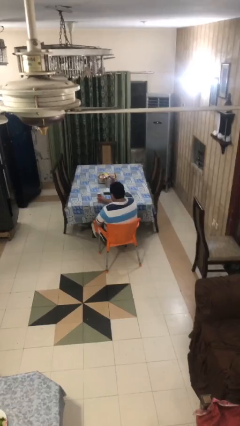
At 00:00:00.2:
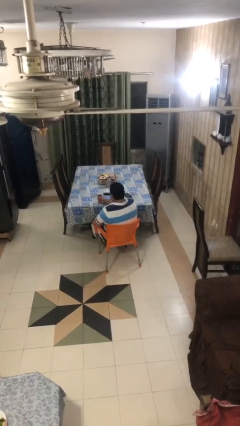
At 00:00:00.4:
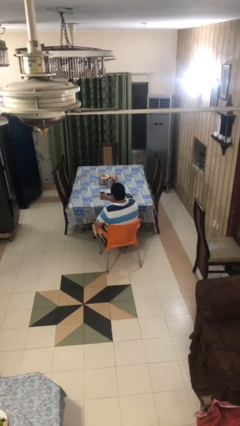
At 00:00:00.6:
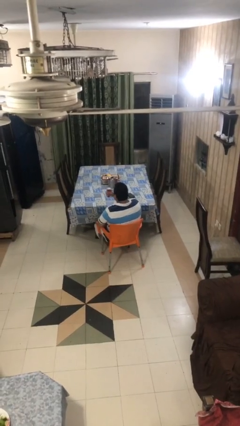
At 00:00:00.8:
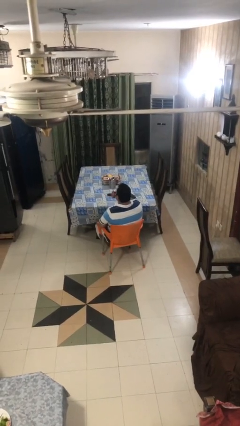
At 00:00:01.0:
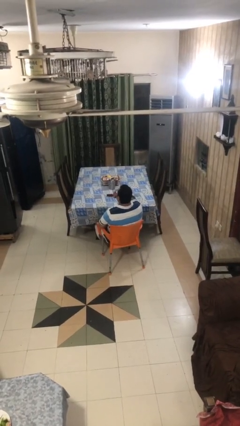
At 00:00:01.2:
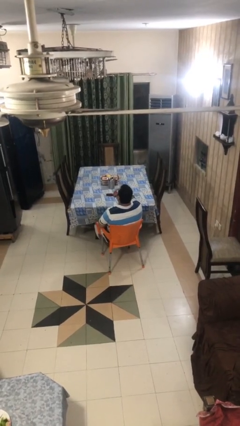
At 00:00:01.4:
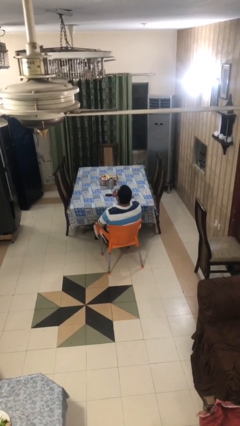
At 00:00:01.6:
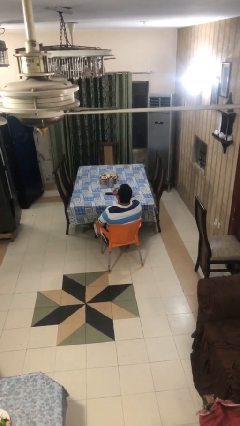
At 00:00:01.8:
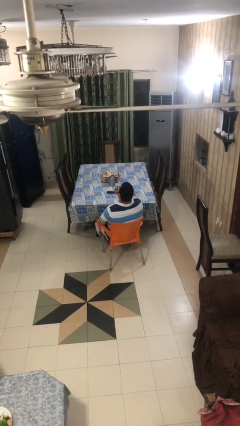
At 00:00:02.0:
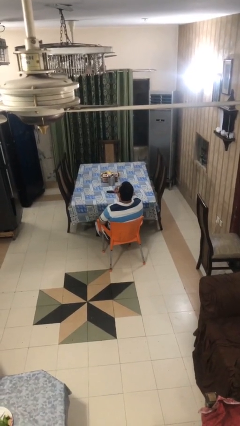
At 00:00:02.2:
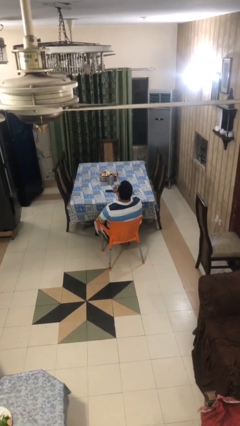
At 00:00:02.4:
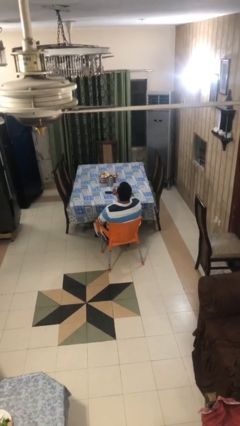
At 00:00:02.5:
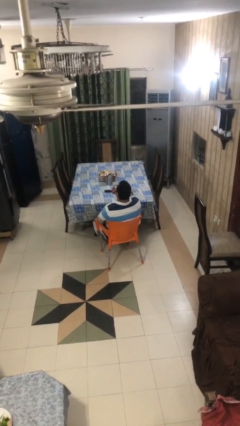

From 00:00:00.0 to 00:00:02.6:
person drinks from beverage can

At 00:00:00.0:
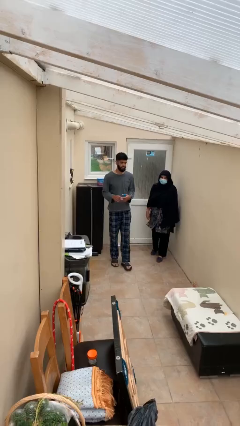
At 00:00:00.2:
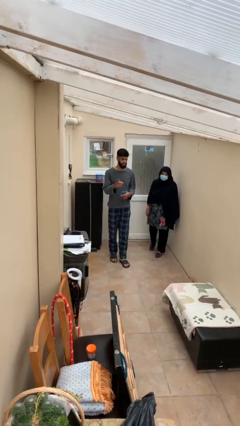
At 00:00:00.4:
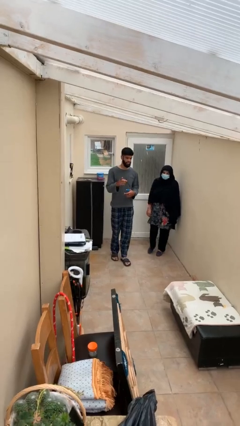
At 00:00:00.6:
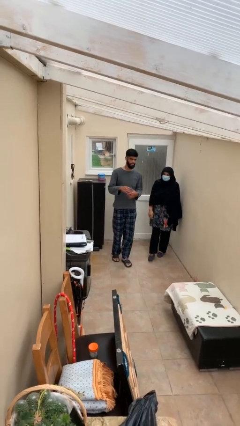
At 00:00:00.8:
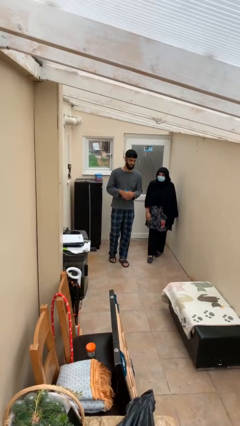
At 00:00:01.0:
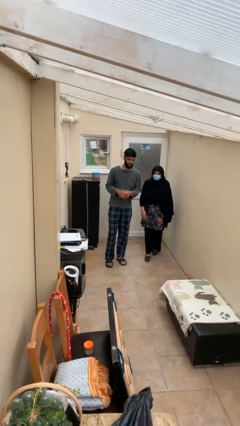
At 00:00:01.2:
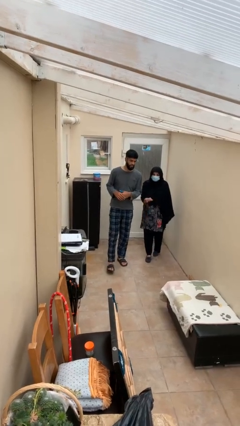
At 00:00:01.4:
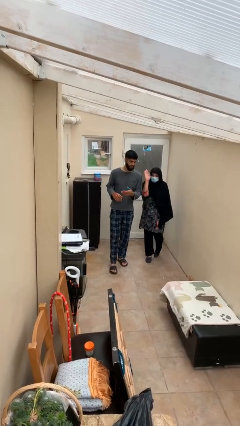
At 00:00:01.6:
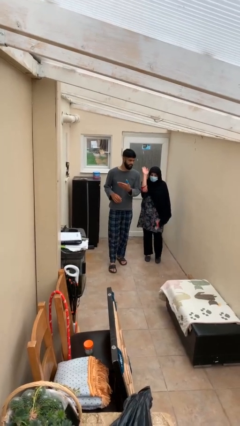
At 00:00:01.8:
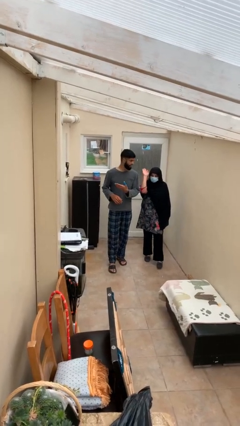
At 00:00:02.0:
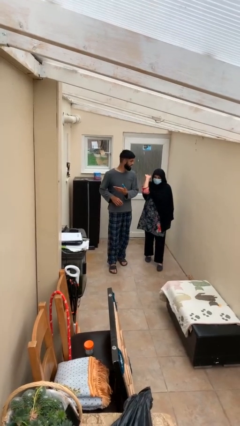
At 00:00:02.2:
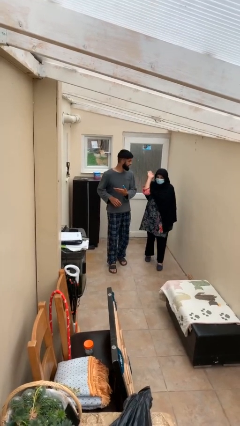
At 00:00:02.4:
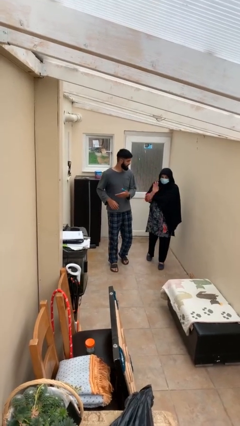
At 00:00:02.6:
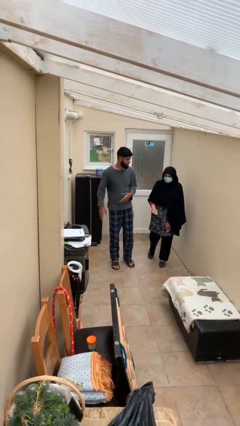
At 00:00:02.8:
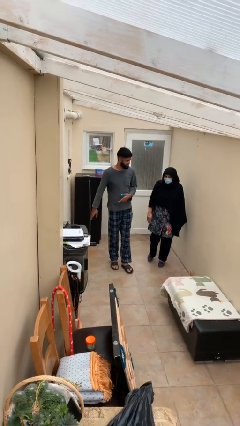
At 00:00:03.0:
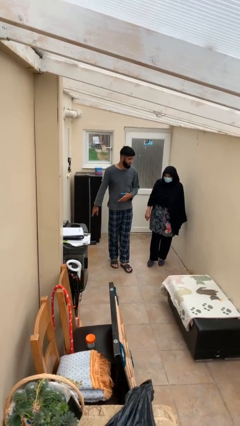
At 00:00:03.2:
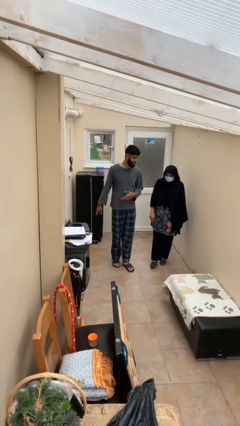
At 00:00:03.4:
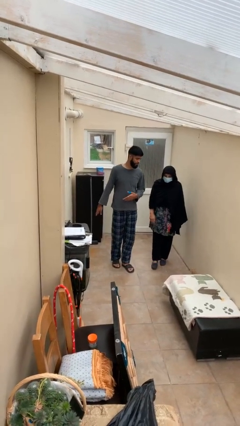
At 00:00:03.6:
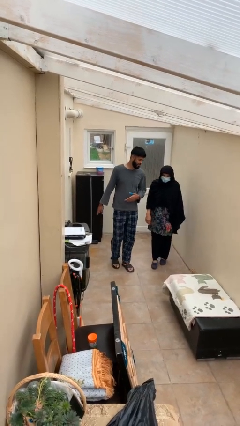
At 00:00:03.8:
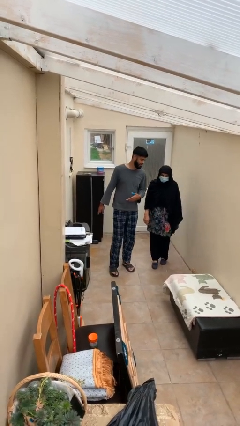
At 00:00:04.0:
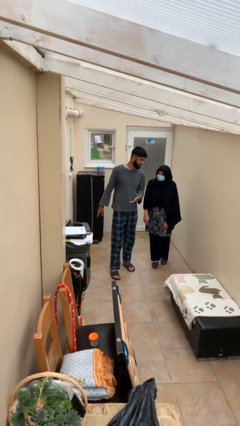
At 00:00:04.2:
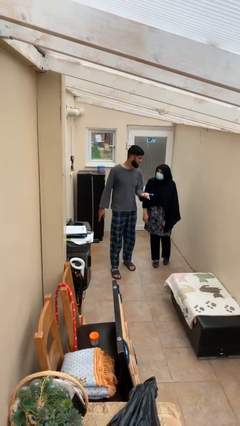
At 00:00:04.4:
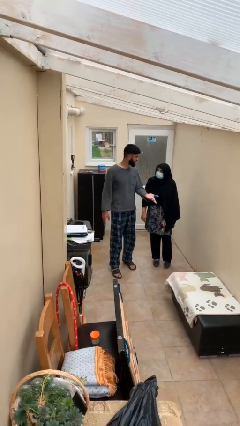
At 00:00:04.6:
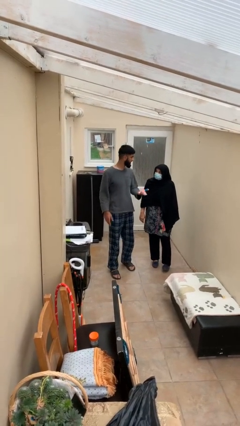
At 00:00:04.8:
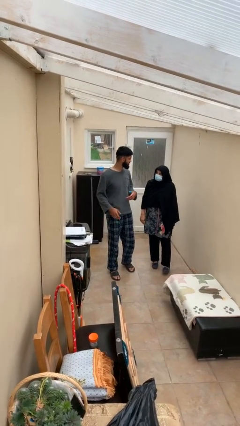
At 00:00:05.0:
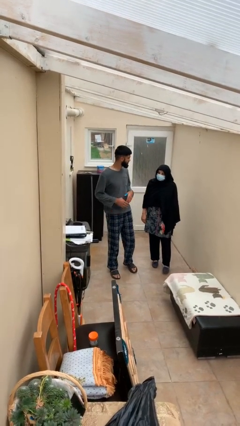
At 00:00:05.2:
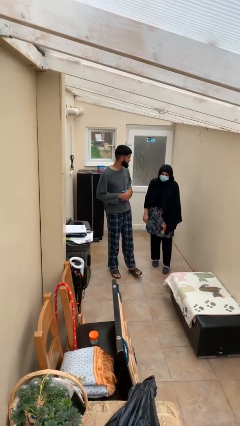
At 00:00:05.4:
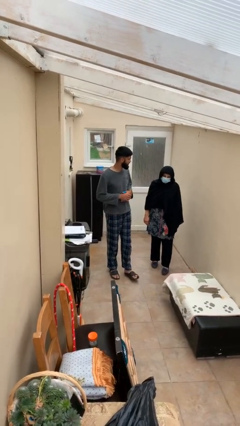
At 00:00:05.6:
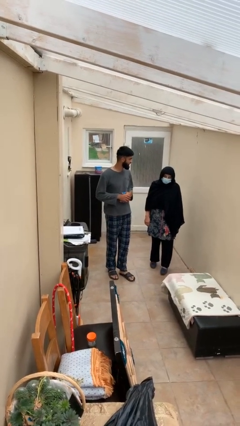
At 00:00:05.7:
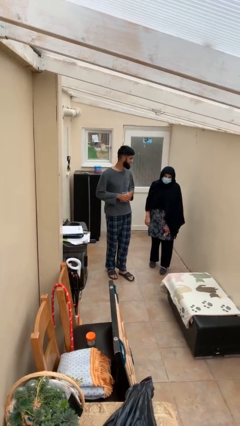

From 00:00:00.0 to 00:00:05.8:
person talks to person

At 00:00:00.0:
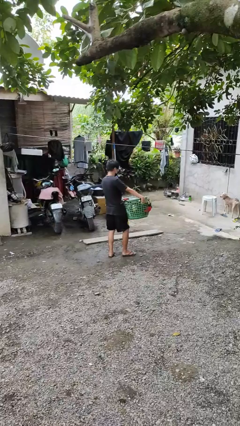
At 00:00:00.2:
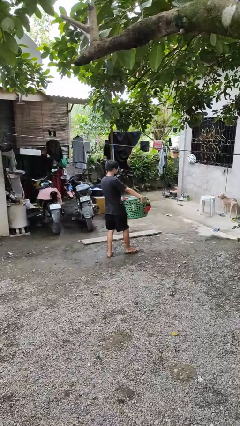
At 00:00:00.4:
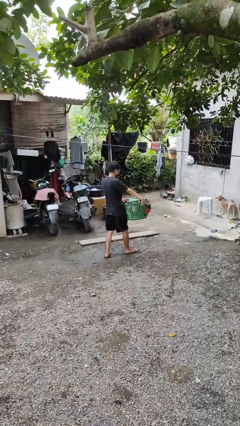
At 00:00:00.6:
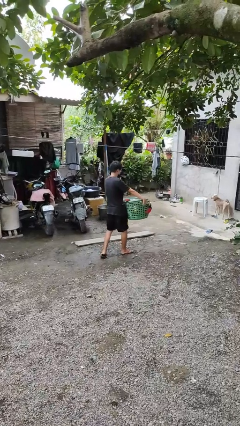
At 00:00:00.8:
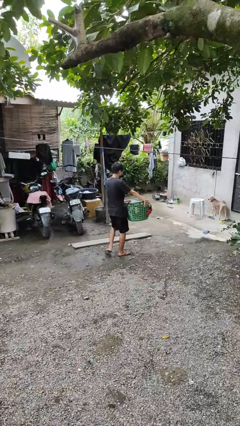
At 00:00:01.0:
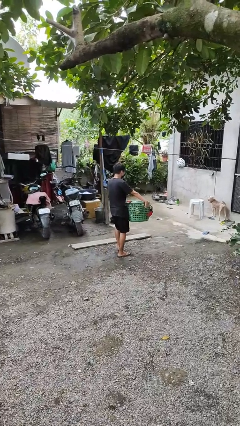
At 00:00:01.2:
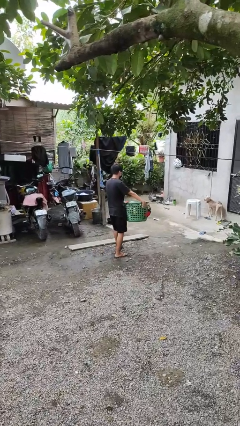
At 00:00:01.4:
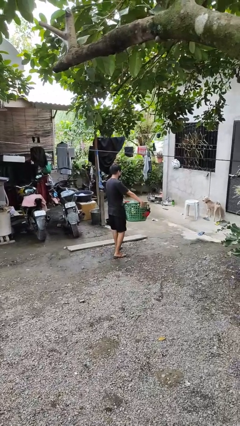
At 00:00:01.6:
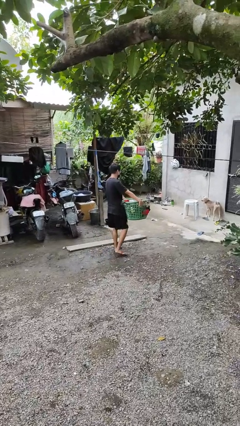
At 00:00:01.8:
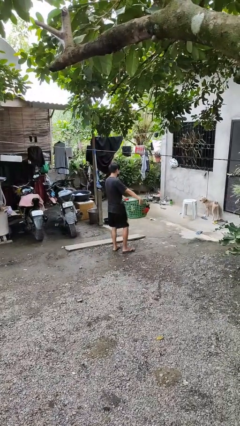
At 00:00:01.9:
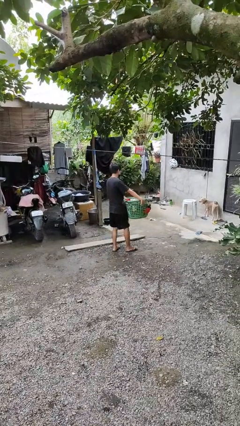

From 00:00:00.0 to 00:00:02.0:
person carries laundry basket

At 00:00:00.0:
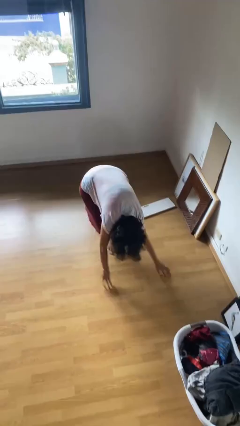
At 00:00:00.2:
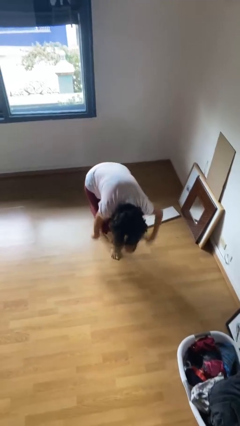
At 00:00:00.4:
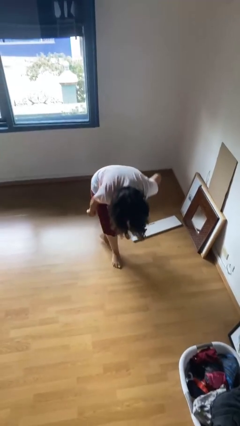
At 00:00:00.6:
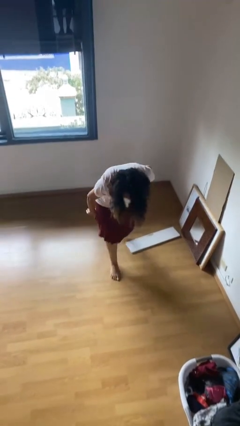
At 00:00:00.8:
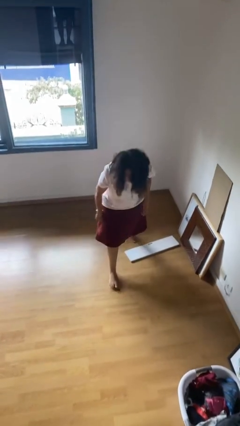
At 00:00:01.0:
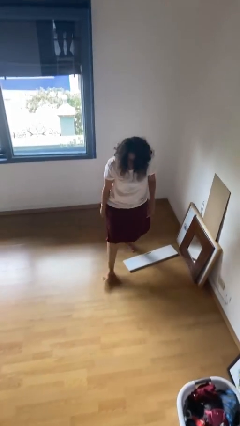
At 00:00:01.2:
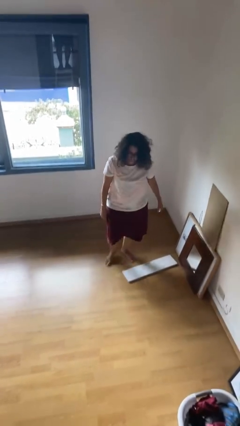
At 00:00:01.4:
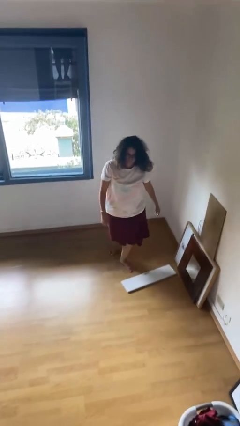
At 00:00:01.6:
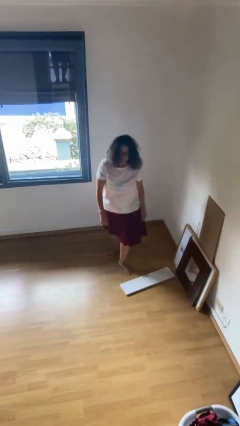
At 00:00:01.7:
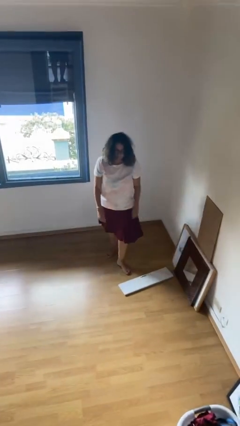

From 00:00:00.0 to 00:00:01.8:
person stands up from floor

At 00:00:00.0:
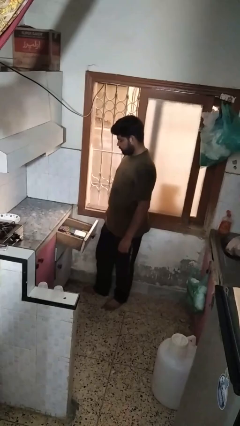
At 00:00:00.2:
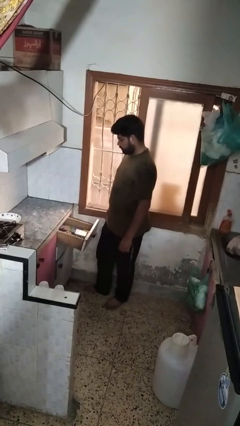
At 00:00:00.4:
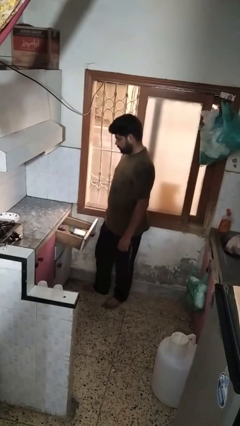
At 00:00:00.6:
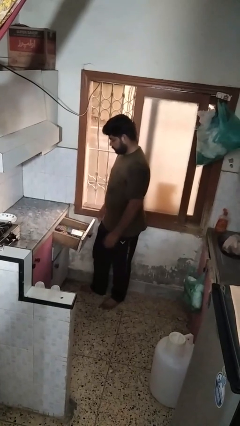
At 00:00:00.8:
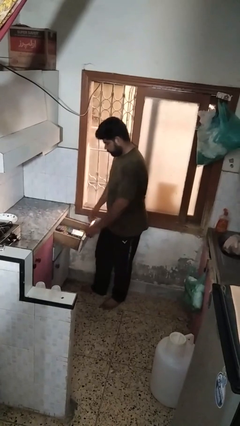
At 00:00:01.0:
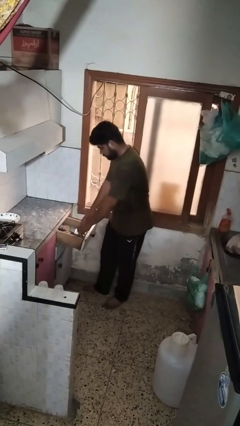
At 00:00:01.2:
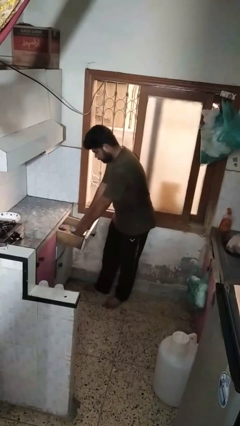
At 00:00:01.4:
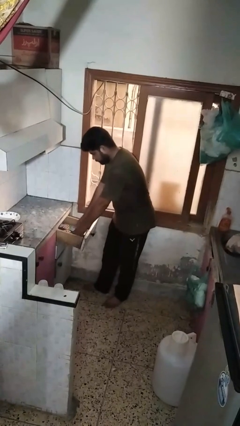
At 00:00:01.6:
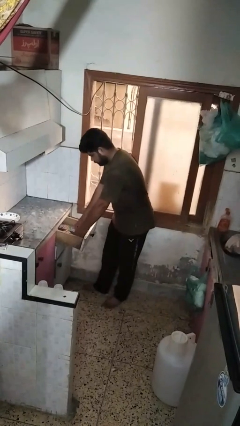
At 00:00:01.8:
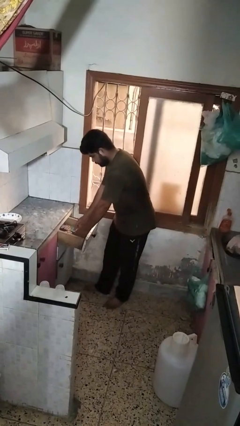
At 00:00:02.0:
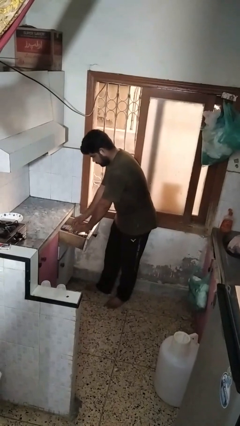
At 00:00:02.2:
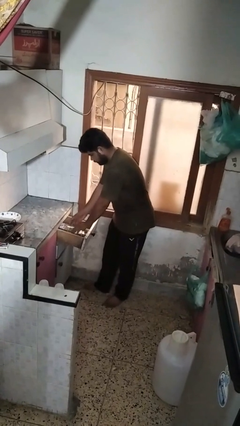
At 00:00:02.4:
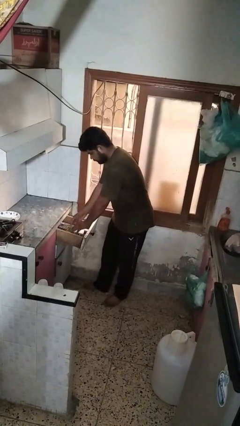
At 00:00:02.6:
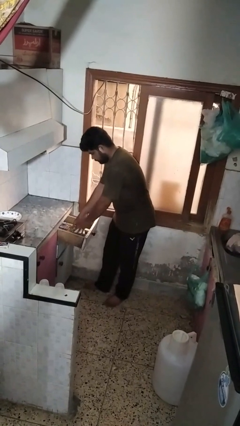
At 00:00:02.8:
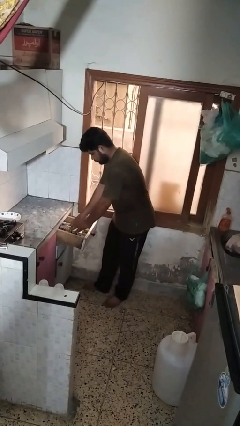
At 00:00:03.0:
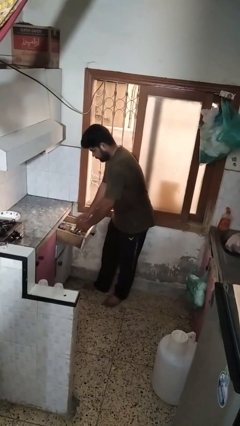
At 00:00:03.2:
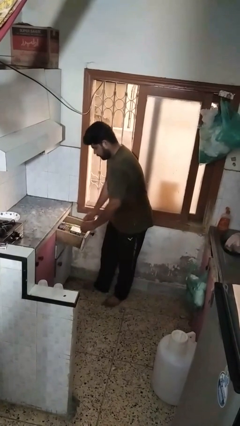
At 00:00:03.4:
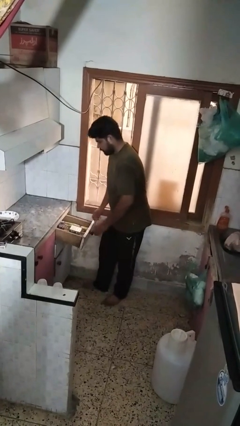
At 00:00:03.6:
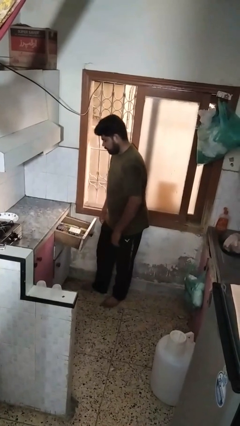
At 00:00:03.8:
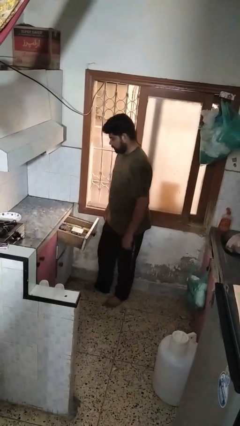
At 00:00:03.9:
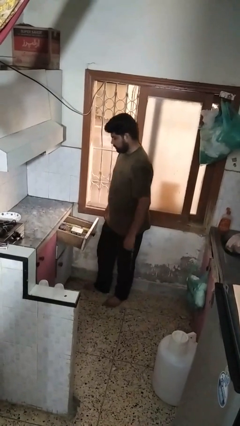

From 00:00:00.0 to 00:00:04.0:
person searches in kitchen drawer

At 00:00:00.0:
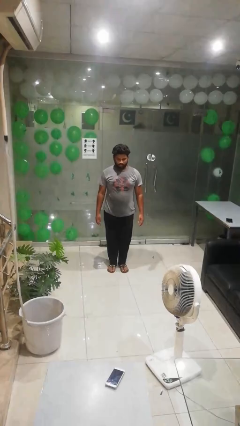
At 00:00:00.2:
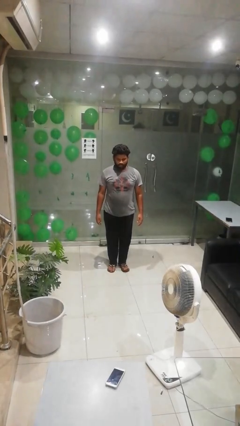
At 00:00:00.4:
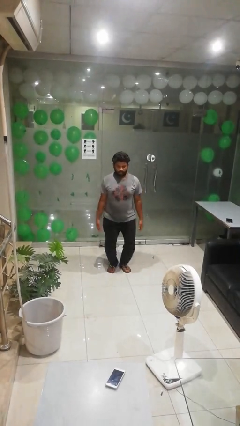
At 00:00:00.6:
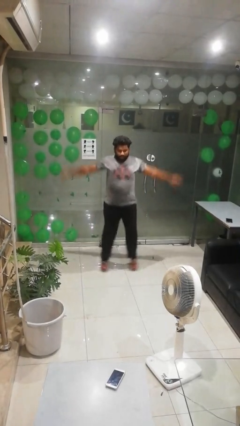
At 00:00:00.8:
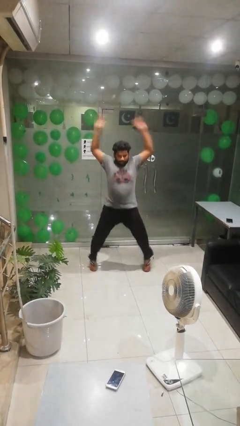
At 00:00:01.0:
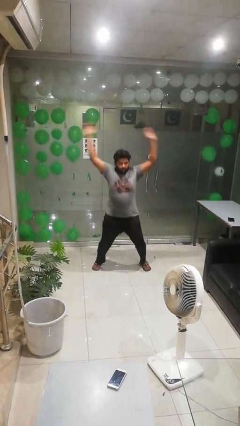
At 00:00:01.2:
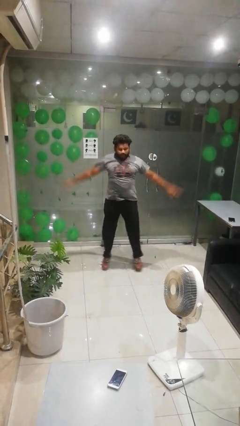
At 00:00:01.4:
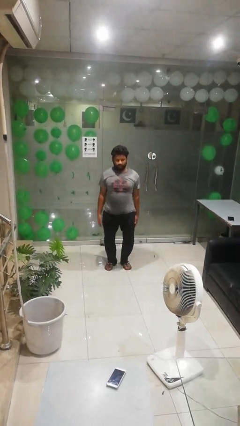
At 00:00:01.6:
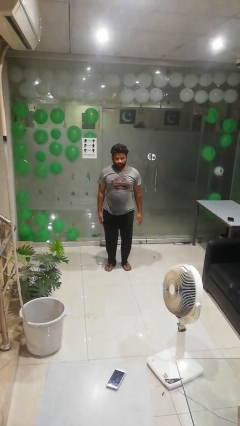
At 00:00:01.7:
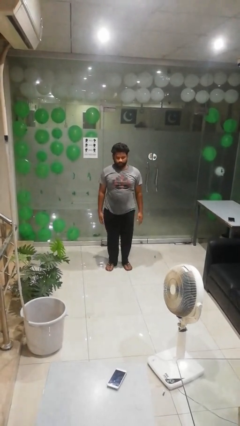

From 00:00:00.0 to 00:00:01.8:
person exercises with jumping jacks
